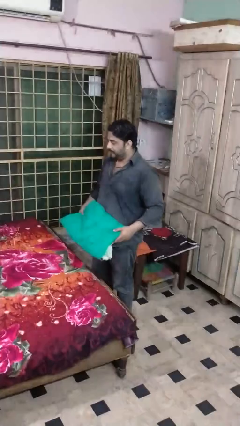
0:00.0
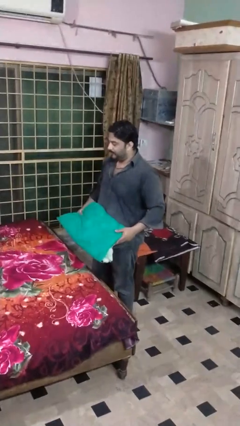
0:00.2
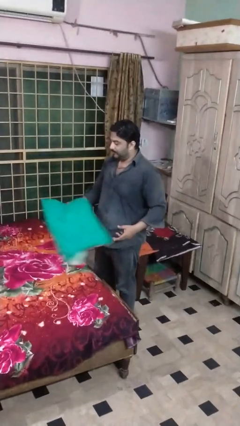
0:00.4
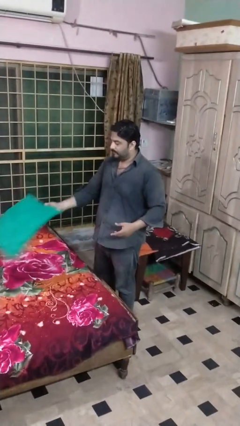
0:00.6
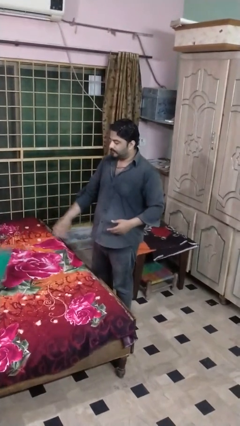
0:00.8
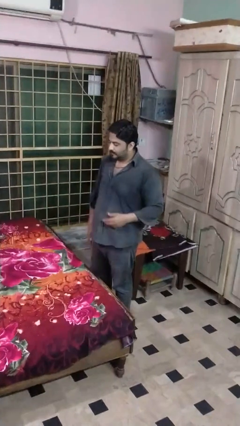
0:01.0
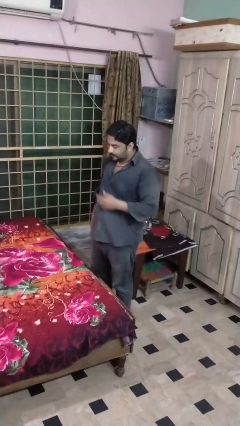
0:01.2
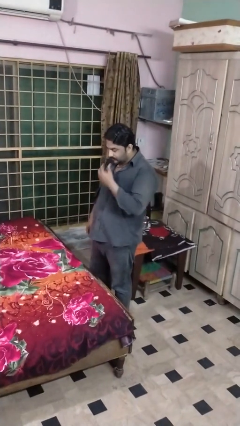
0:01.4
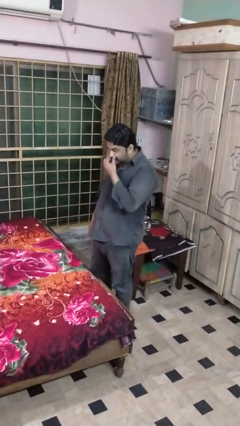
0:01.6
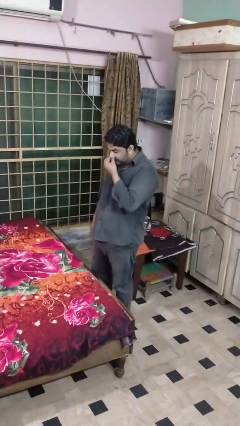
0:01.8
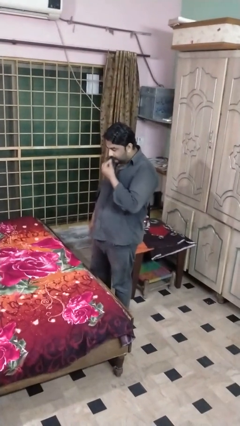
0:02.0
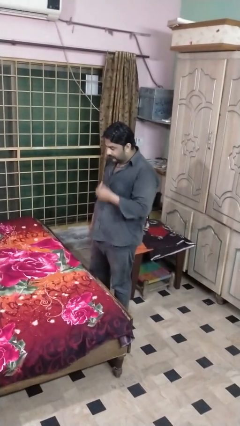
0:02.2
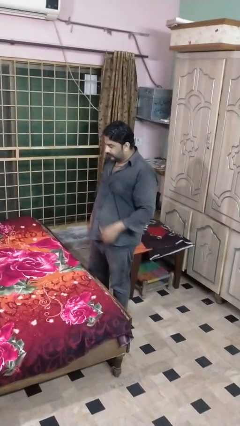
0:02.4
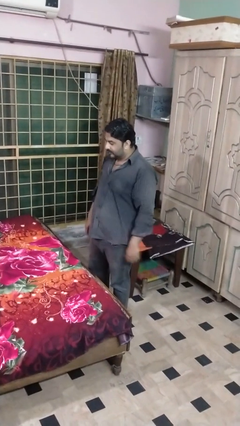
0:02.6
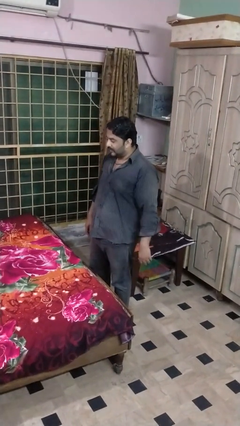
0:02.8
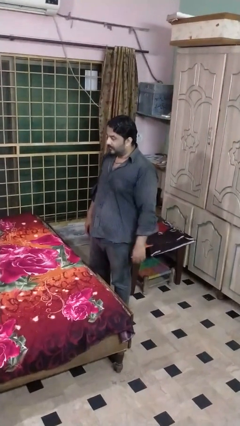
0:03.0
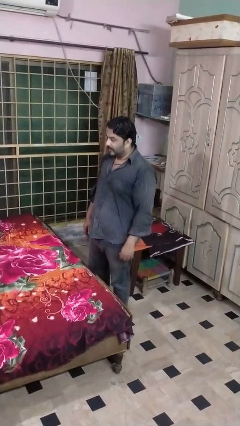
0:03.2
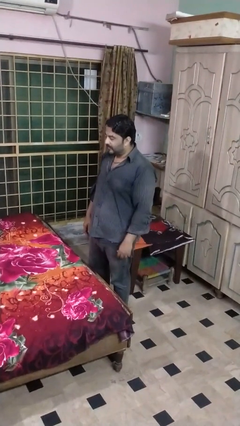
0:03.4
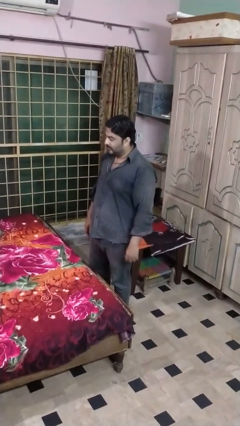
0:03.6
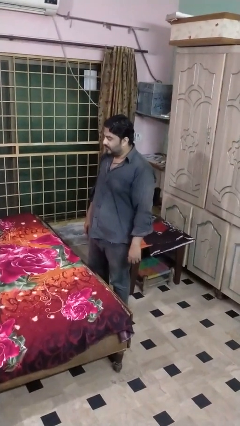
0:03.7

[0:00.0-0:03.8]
person puts down object on bed

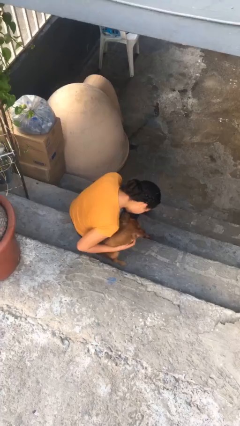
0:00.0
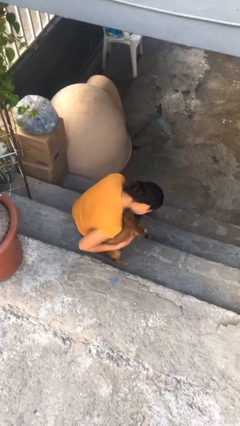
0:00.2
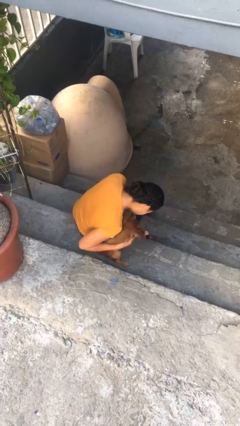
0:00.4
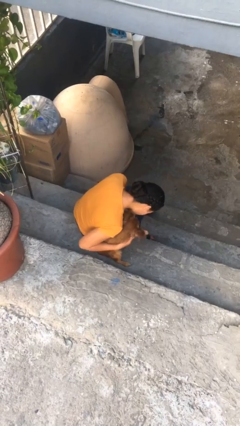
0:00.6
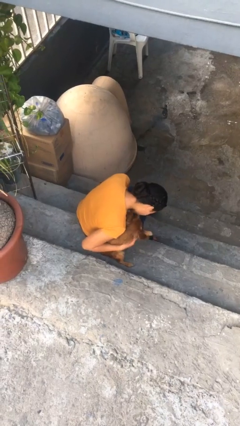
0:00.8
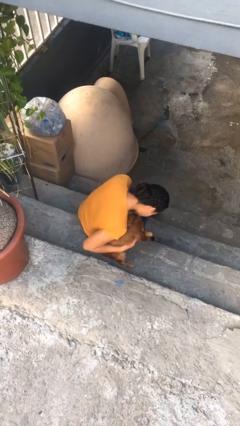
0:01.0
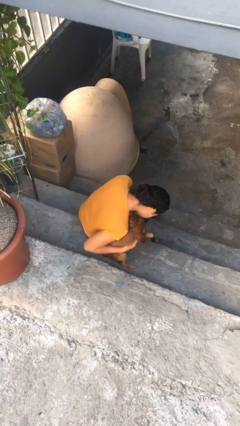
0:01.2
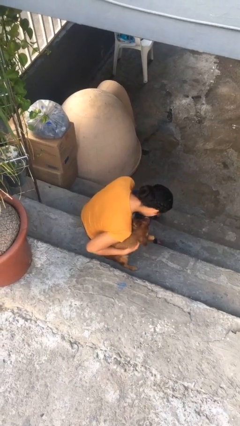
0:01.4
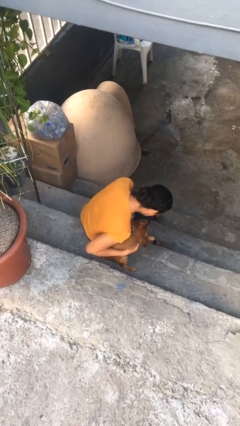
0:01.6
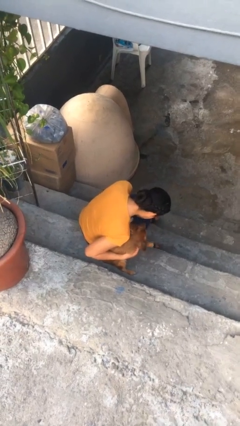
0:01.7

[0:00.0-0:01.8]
person hugs dog

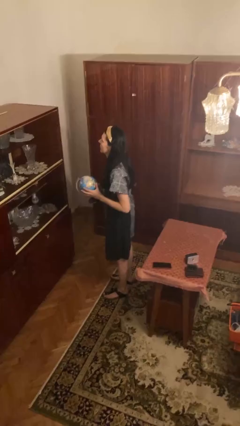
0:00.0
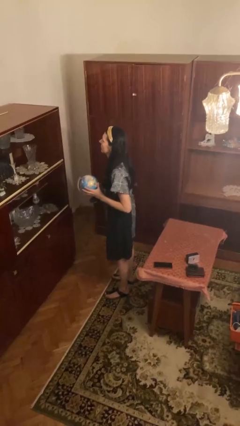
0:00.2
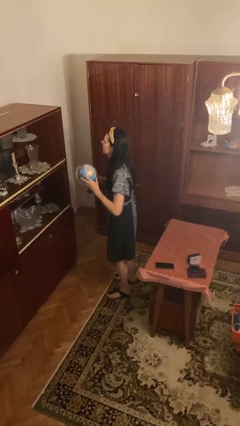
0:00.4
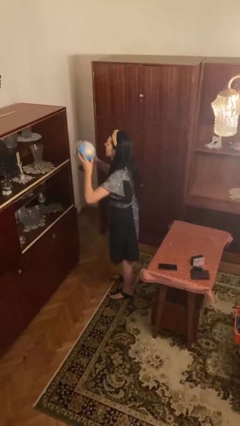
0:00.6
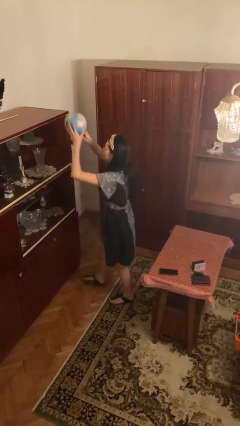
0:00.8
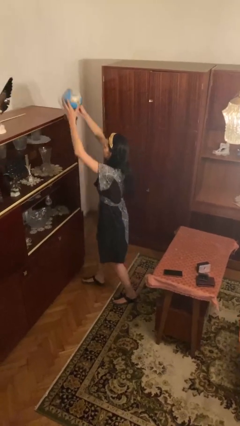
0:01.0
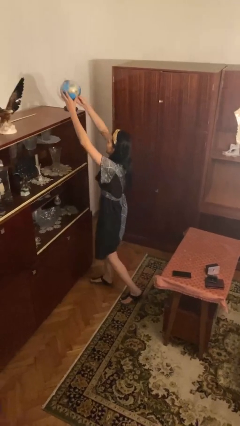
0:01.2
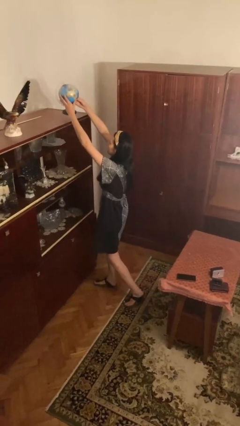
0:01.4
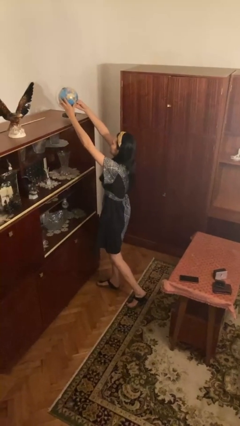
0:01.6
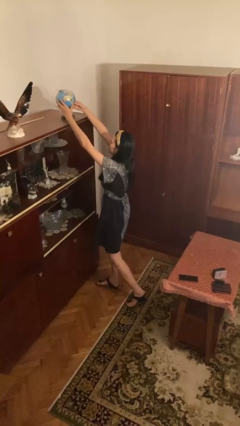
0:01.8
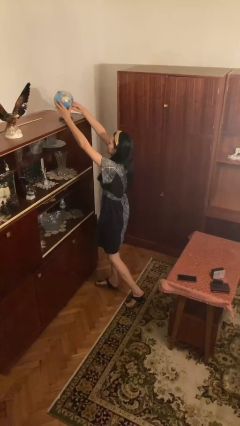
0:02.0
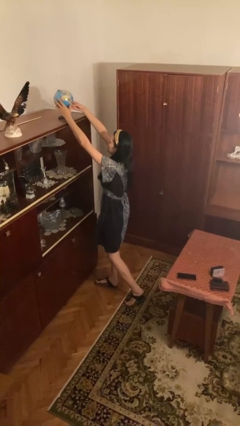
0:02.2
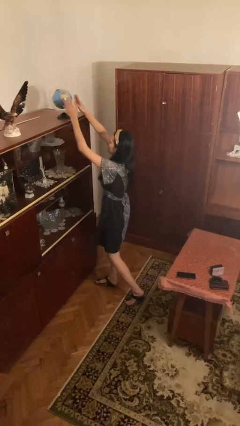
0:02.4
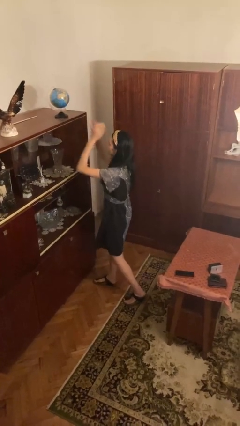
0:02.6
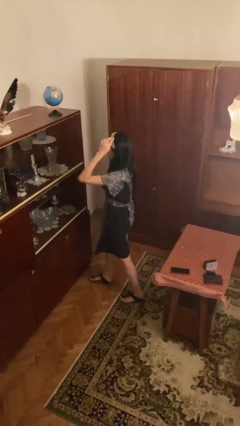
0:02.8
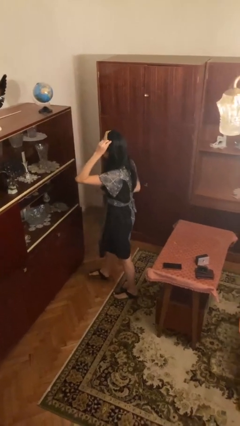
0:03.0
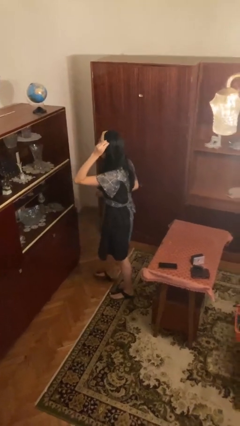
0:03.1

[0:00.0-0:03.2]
person puts down object on countertop

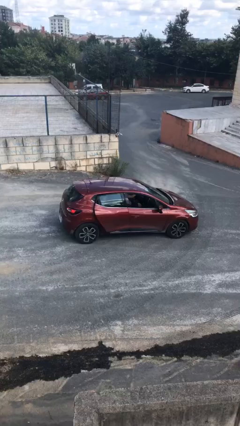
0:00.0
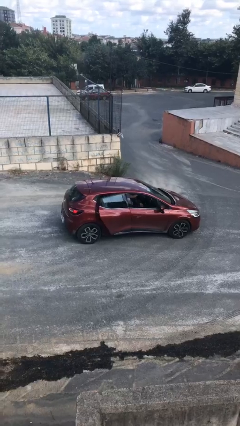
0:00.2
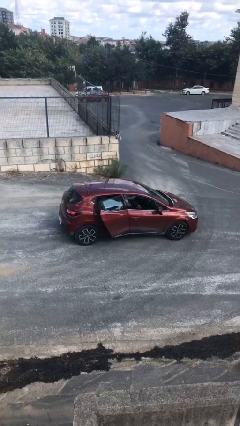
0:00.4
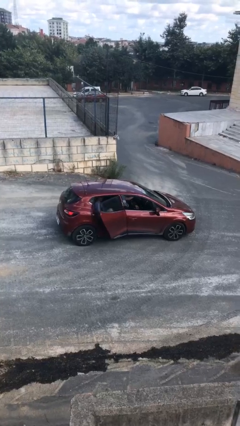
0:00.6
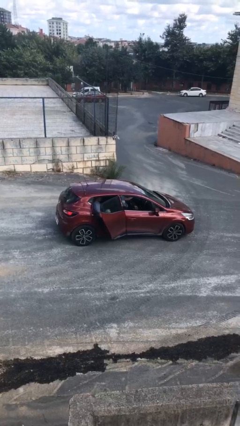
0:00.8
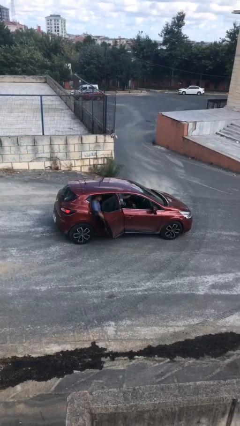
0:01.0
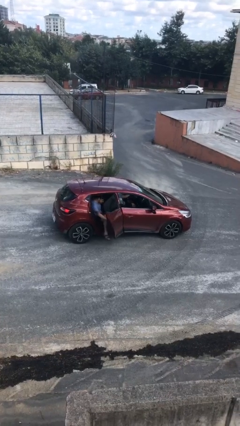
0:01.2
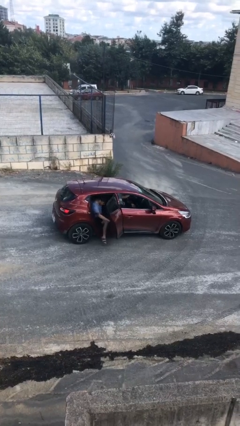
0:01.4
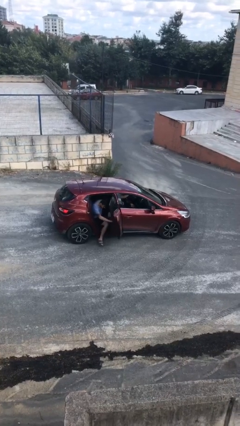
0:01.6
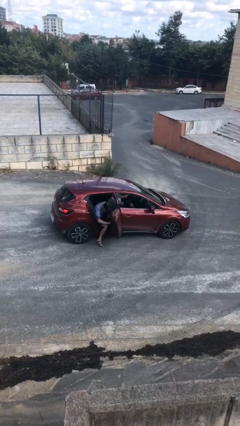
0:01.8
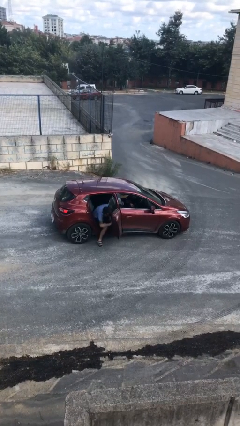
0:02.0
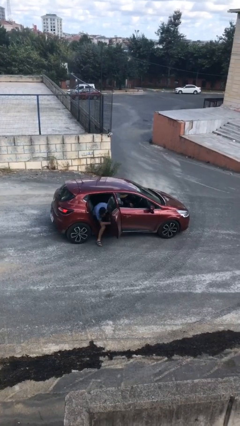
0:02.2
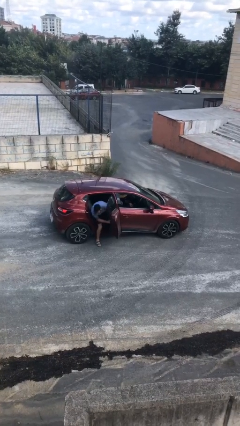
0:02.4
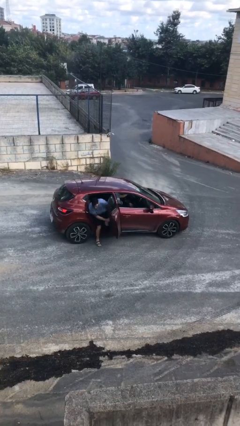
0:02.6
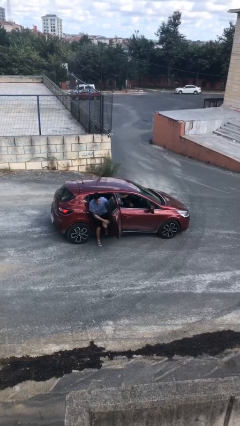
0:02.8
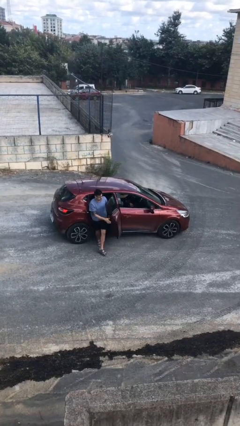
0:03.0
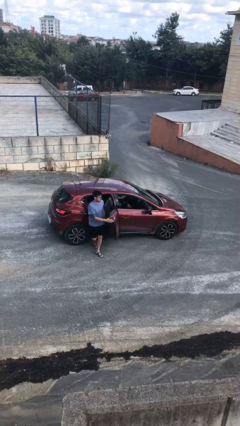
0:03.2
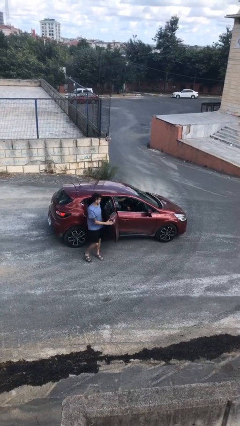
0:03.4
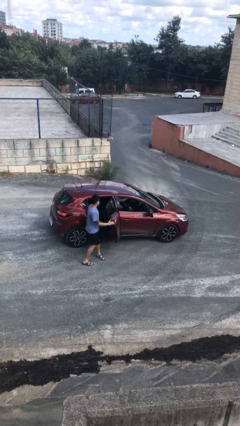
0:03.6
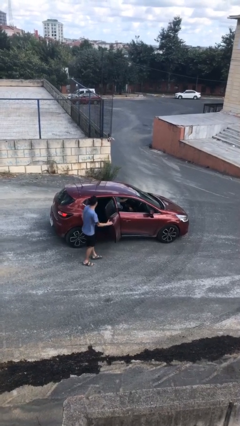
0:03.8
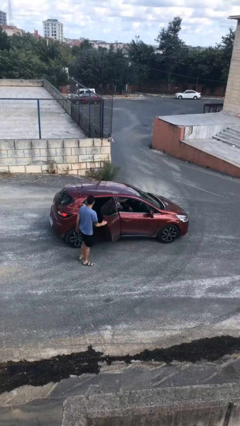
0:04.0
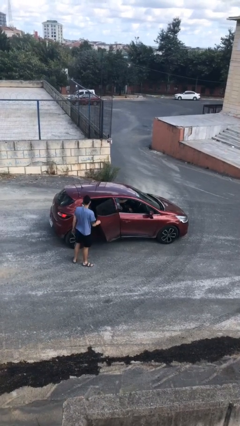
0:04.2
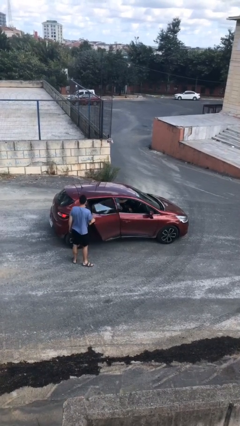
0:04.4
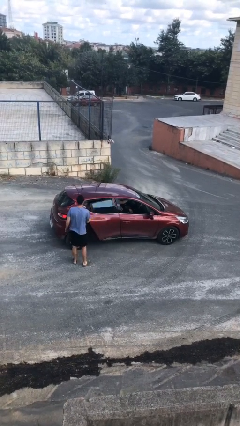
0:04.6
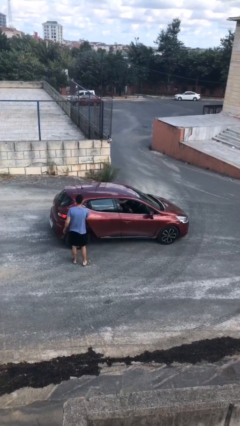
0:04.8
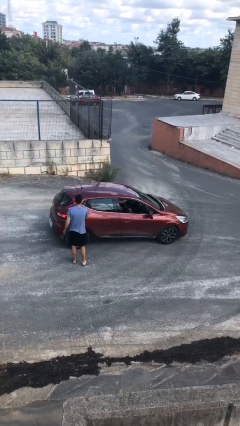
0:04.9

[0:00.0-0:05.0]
car drops off person

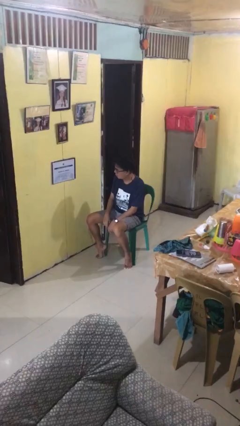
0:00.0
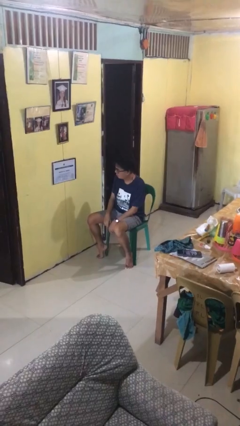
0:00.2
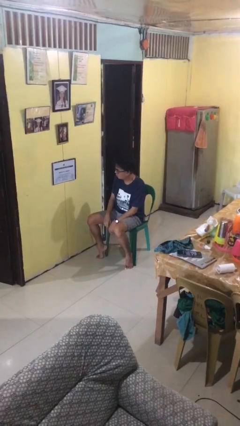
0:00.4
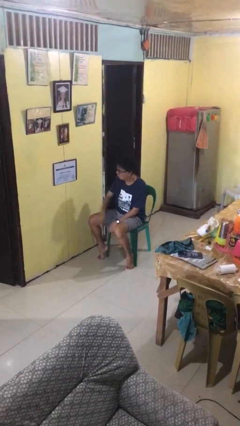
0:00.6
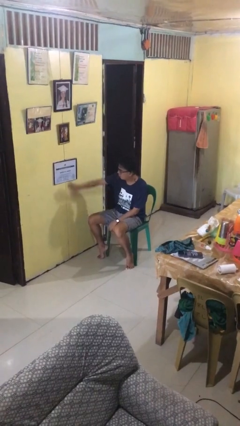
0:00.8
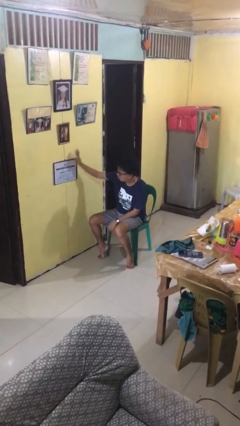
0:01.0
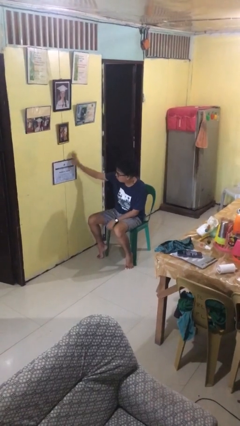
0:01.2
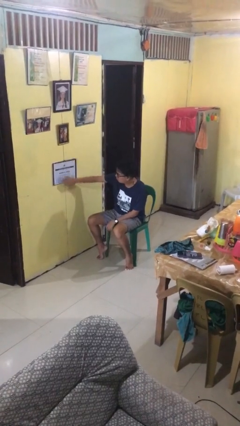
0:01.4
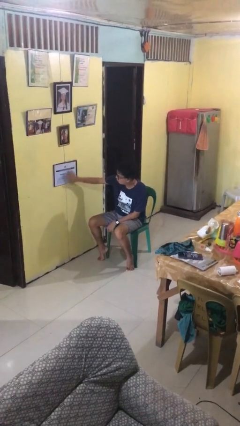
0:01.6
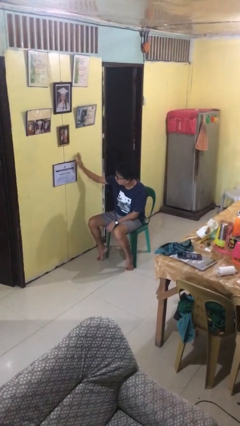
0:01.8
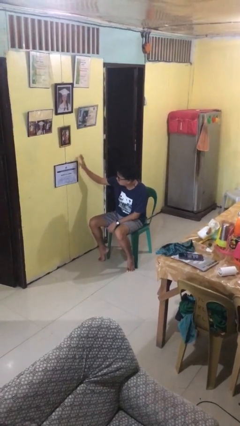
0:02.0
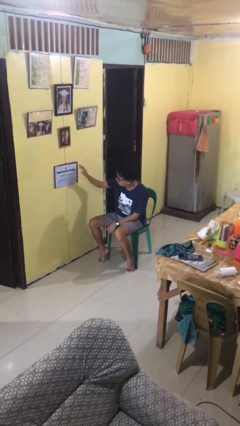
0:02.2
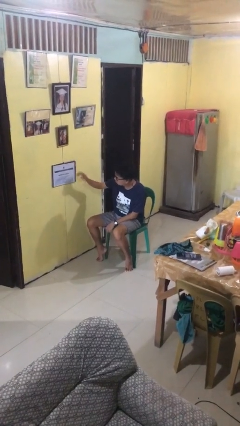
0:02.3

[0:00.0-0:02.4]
person waves hand over object

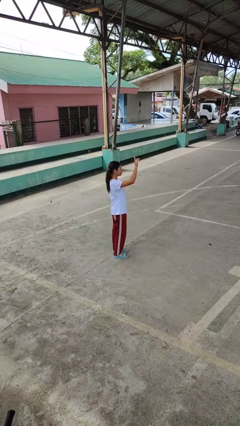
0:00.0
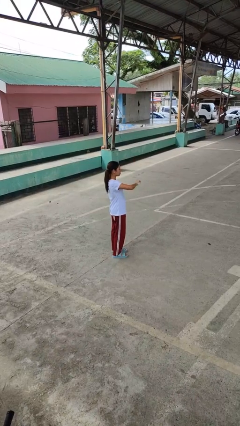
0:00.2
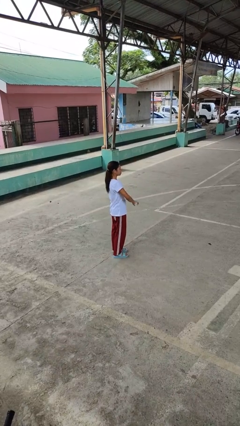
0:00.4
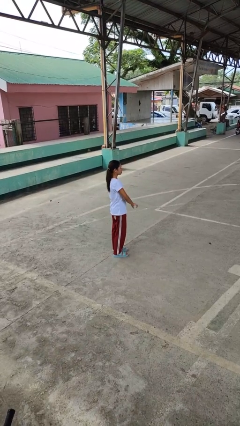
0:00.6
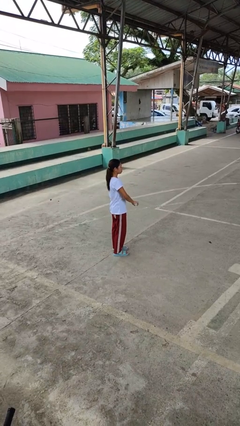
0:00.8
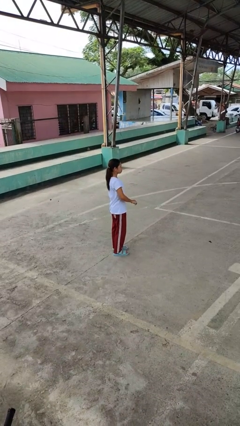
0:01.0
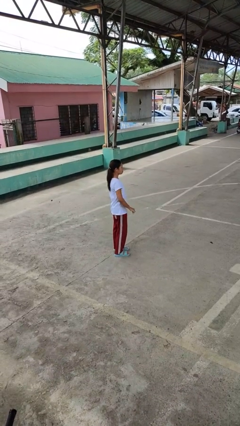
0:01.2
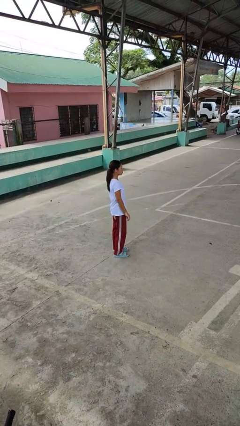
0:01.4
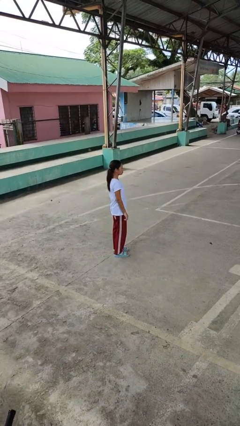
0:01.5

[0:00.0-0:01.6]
person gestures swipe down
